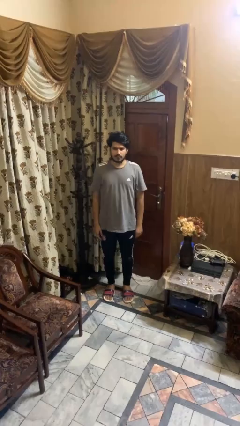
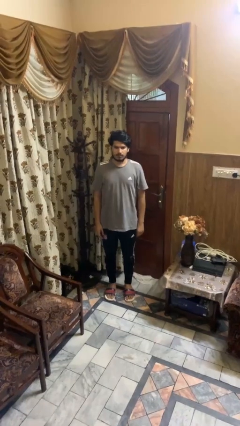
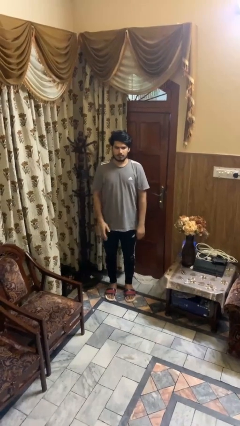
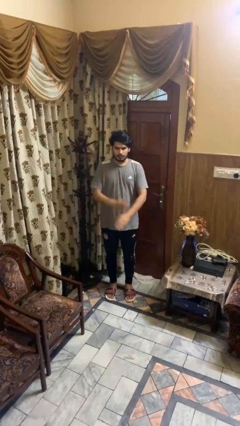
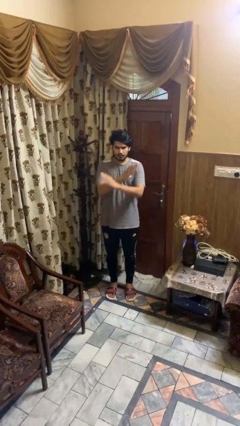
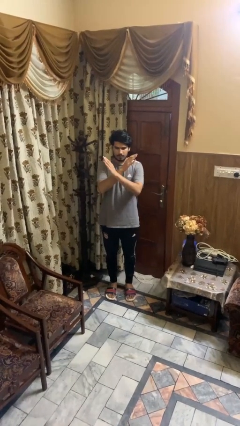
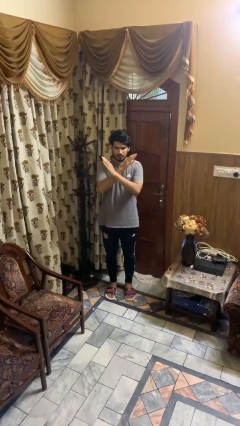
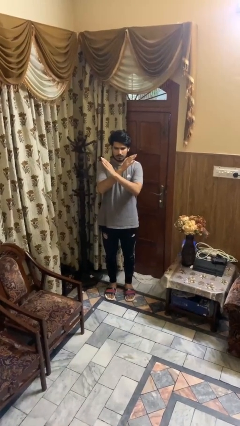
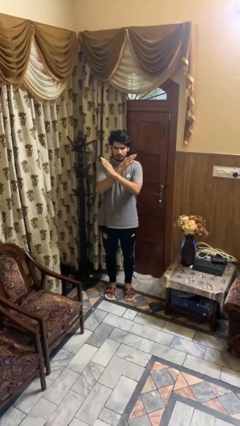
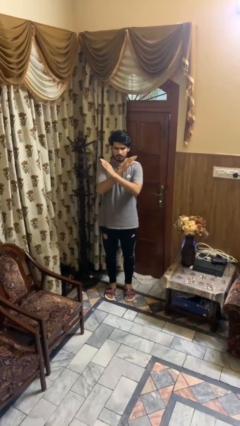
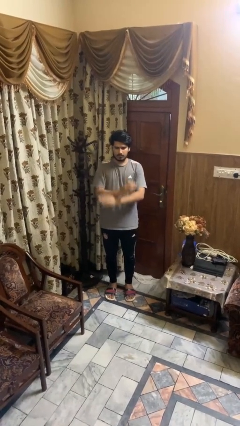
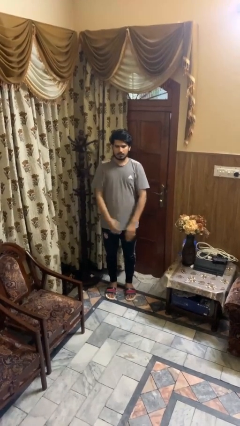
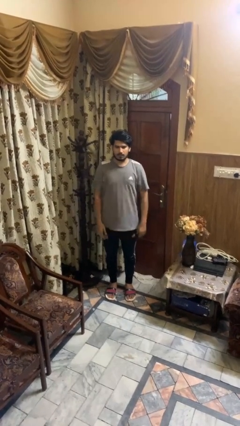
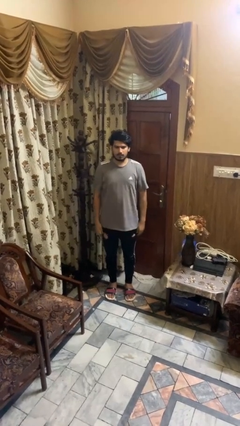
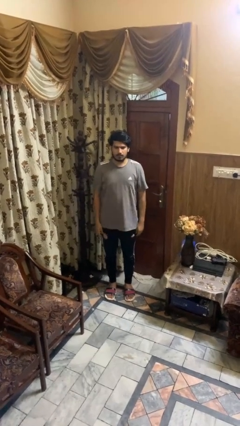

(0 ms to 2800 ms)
person gestures arms x

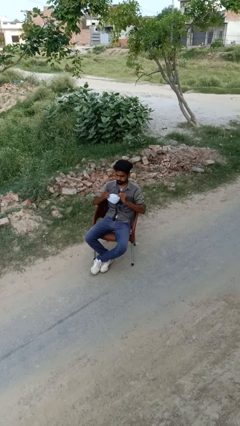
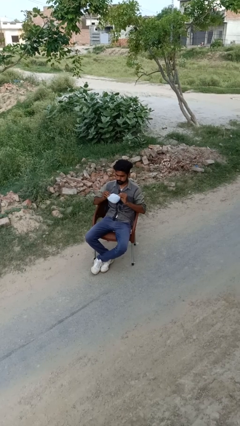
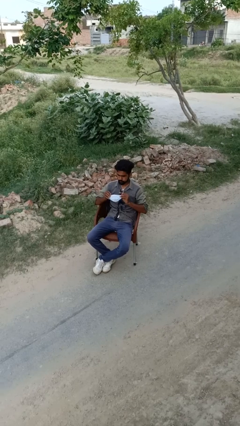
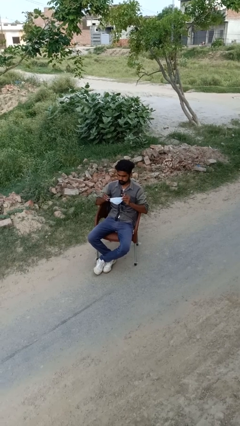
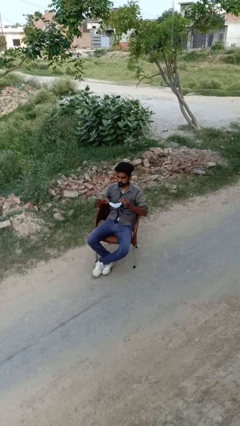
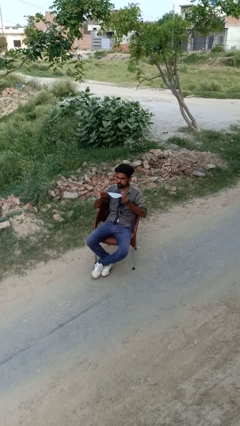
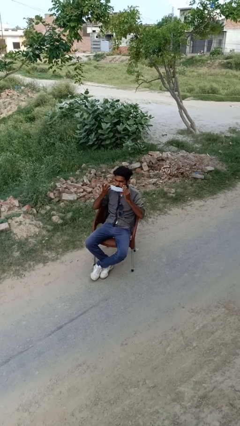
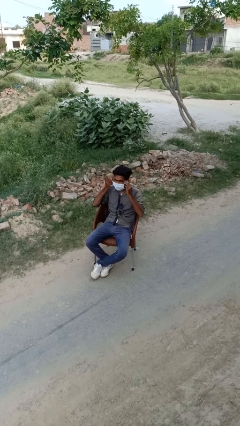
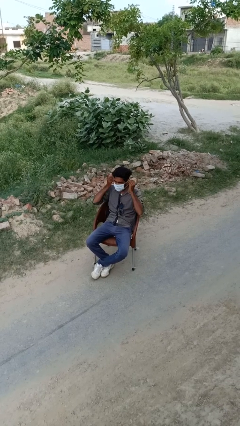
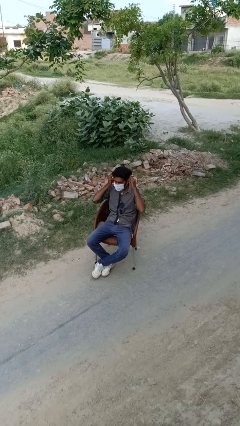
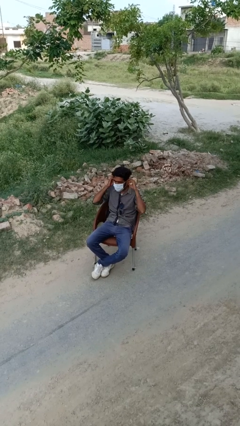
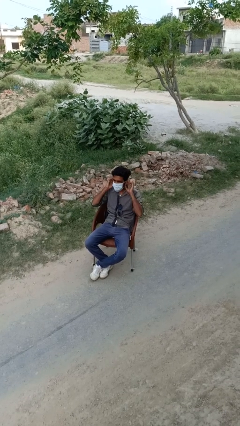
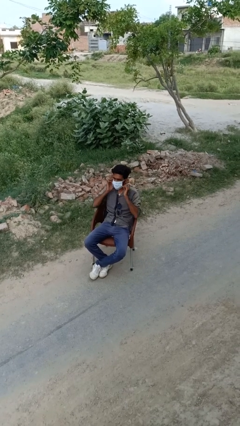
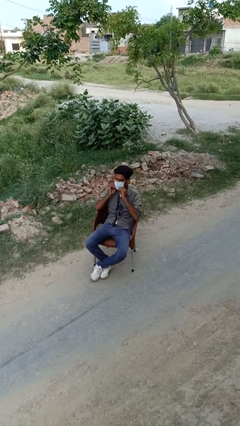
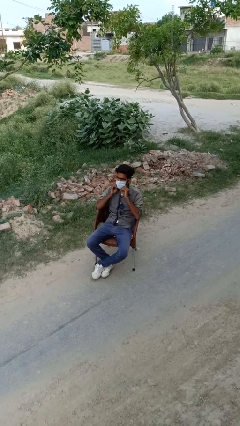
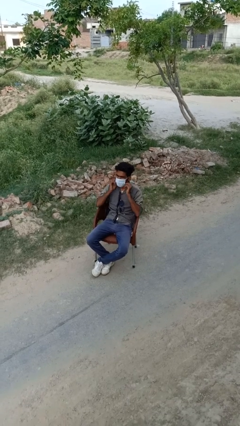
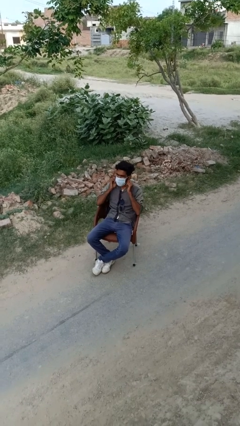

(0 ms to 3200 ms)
person puts on facemask

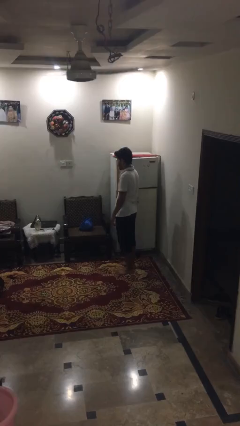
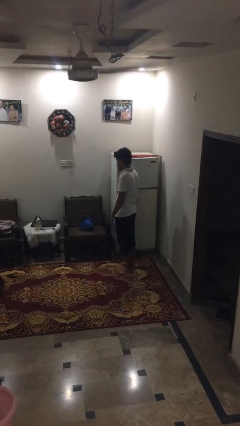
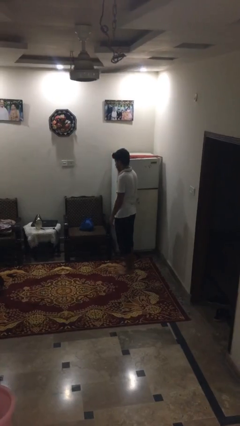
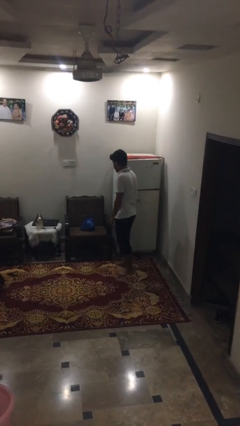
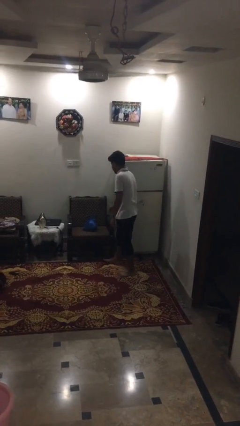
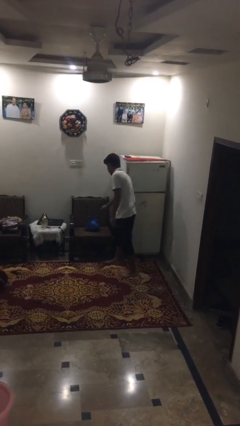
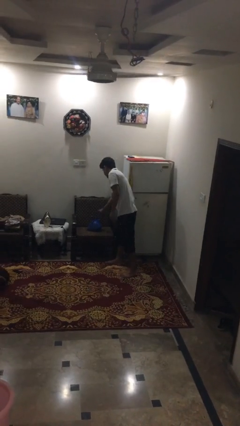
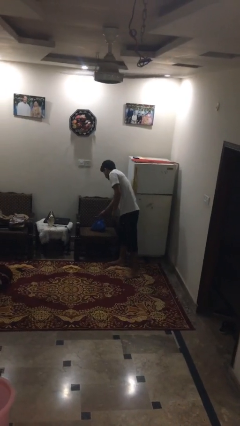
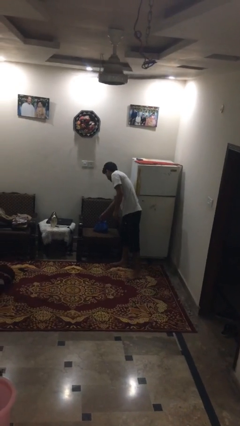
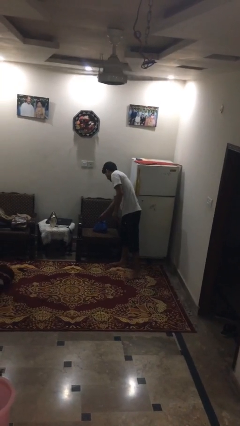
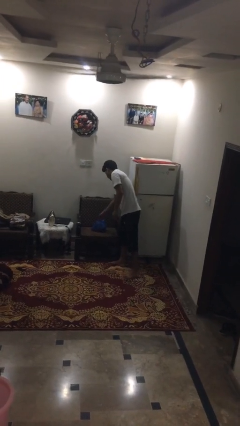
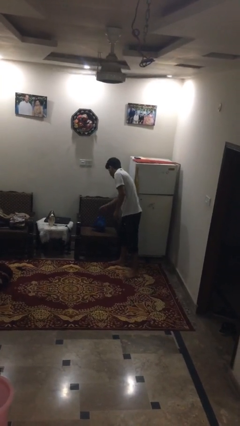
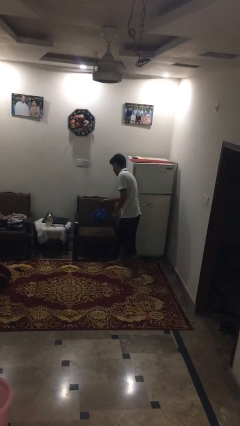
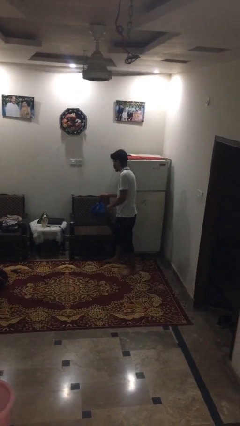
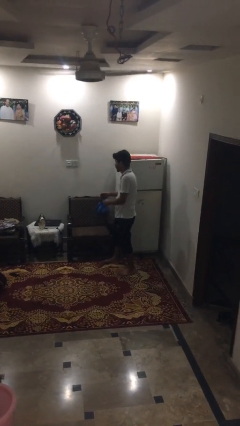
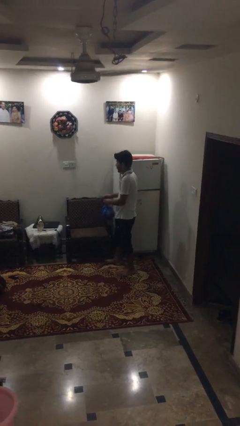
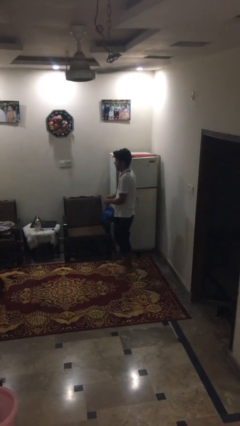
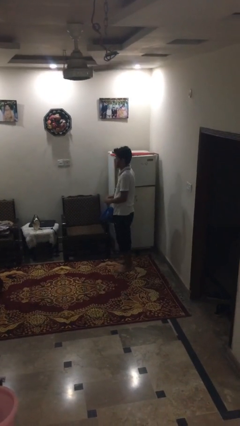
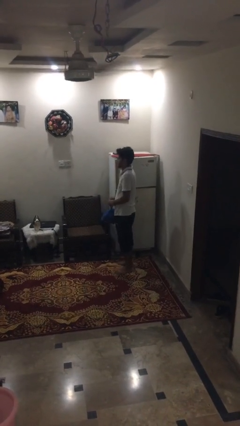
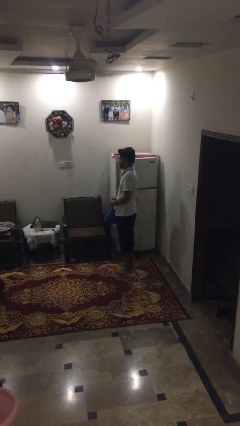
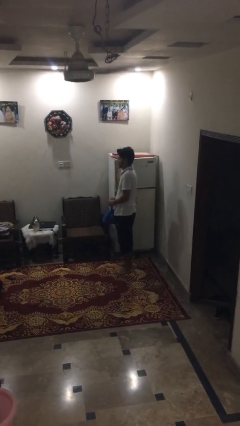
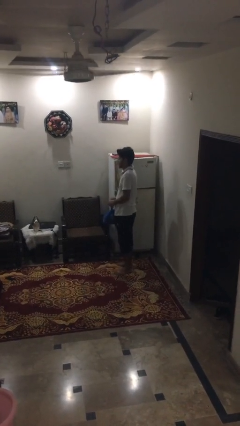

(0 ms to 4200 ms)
person picks up object from couch

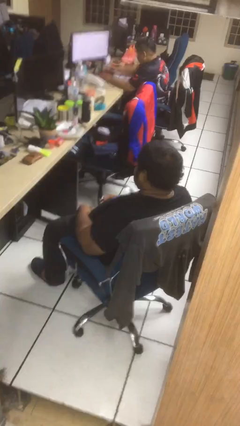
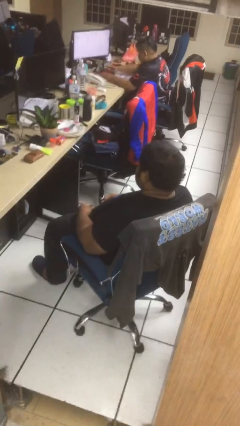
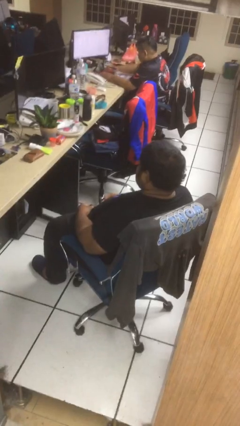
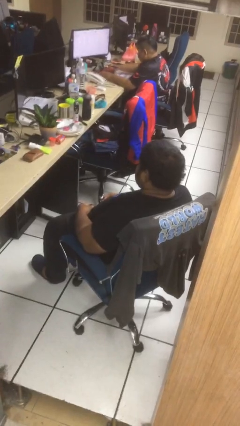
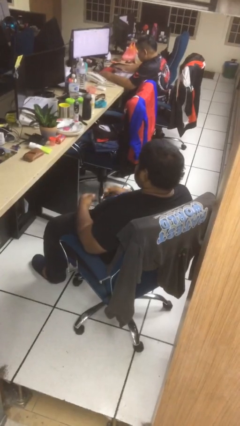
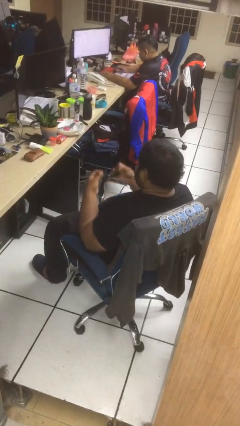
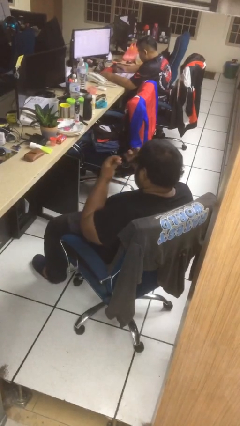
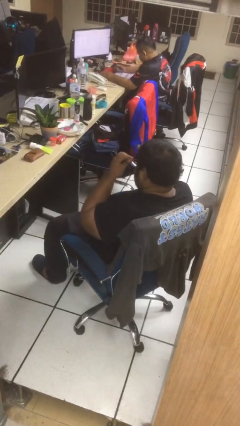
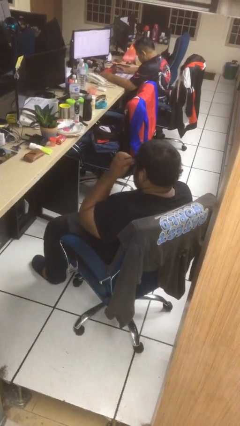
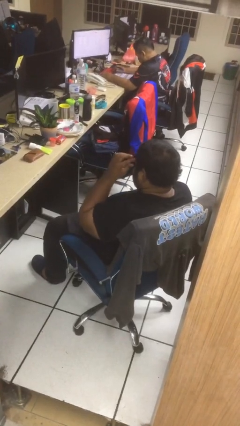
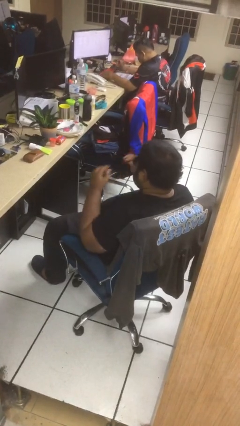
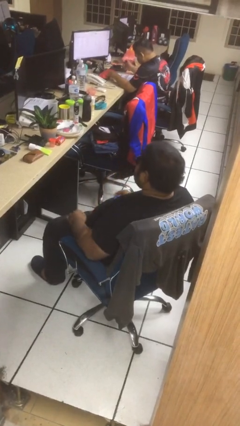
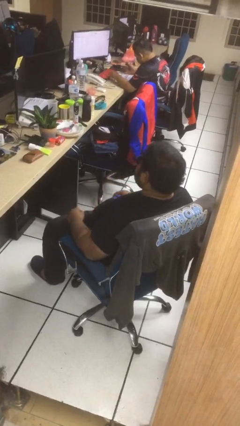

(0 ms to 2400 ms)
person puts on sunglasses

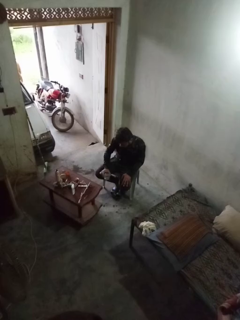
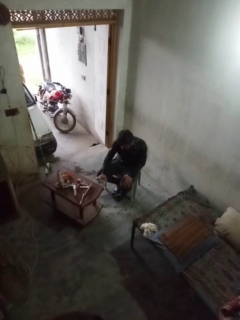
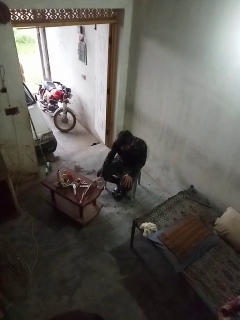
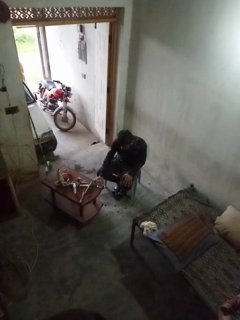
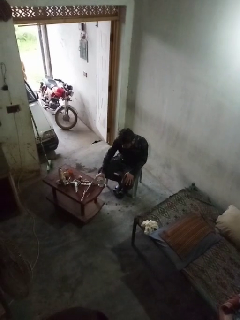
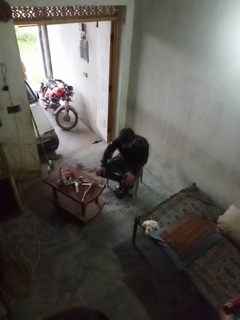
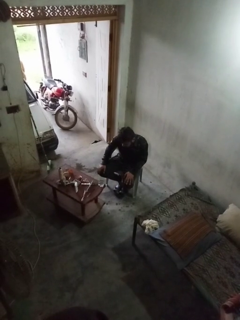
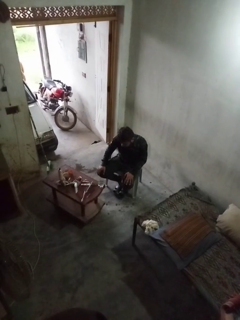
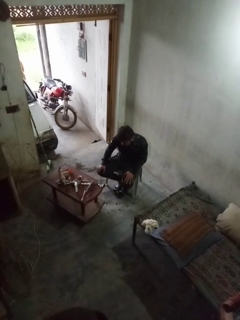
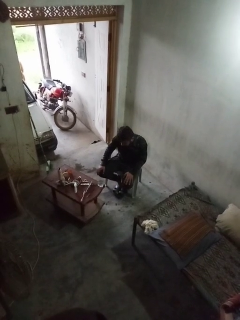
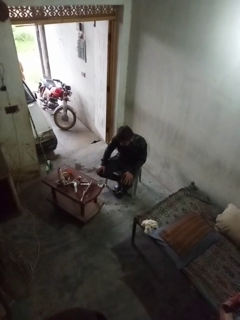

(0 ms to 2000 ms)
person puts down object on table

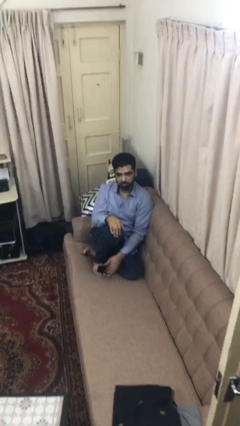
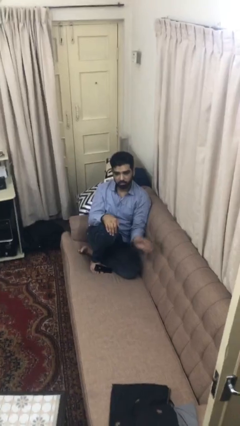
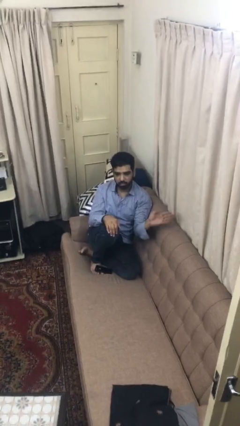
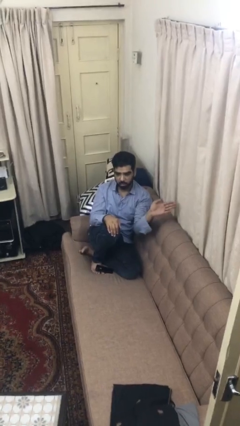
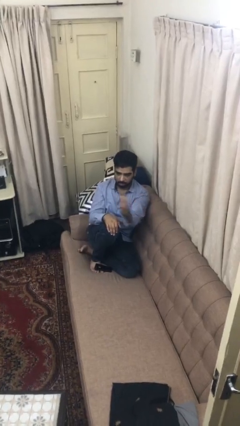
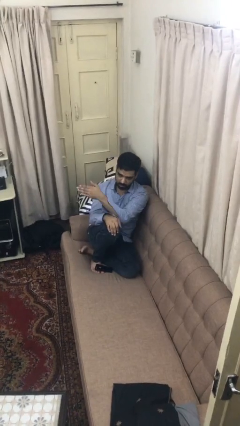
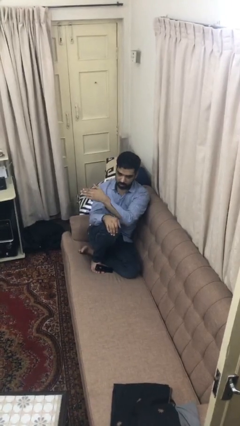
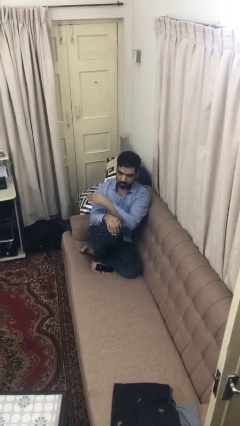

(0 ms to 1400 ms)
person gestures swipe right

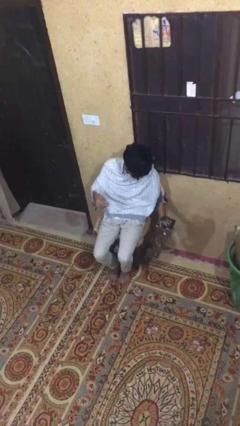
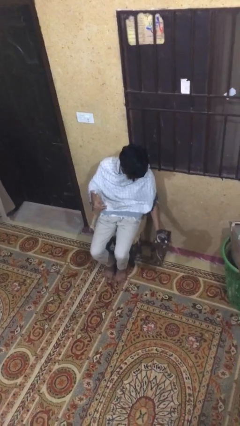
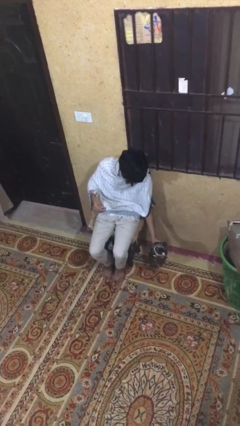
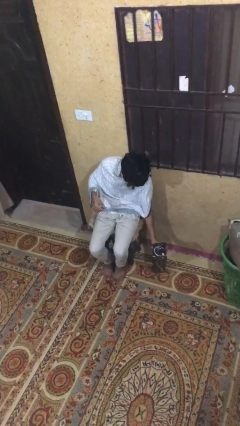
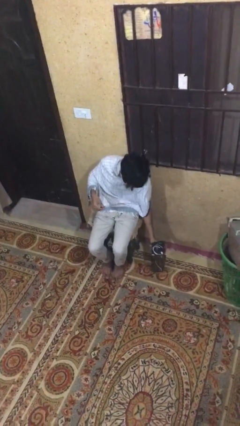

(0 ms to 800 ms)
person puts down object on floor

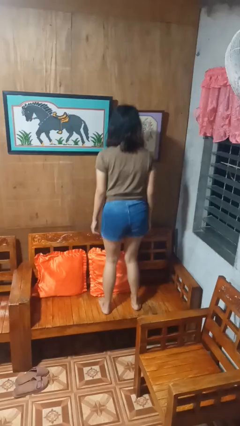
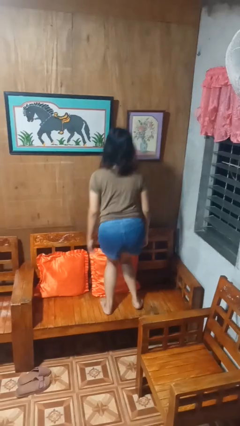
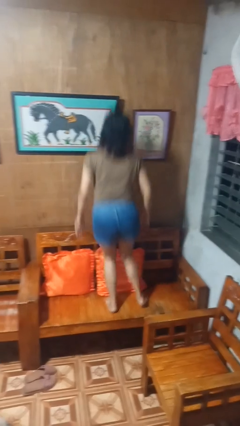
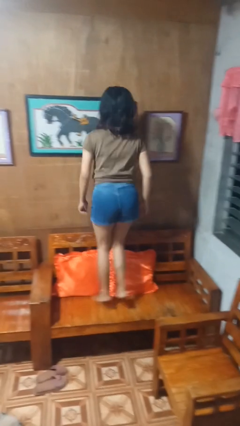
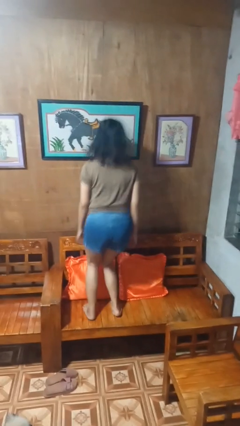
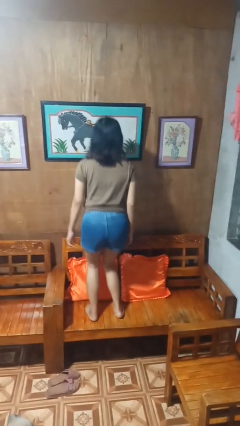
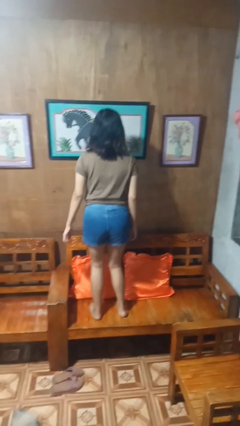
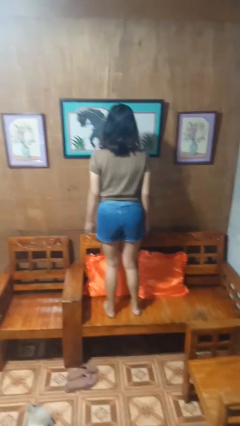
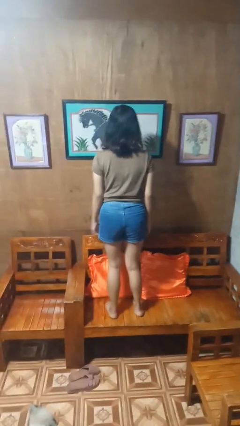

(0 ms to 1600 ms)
person jumps on couch
